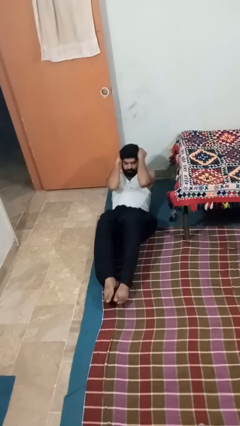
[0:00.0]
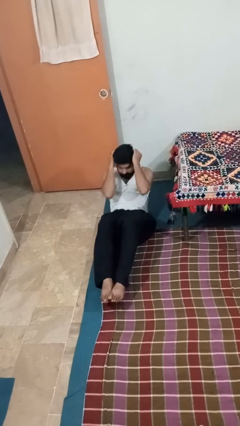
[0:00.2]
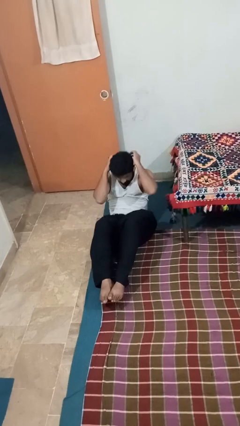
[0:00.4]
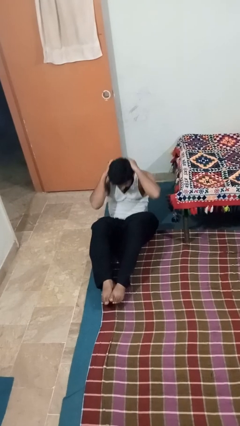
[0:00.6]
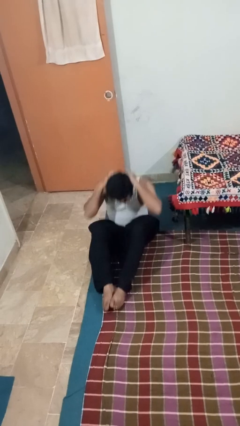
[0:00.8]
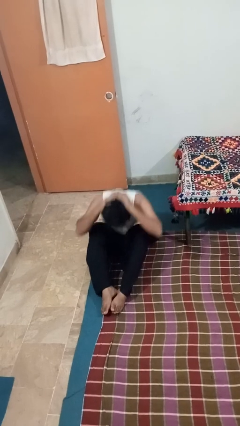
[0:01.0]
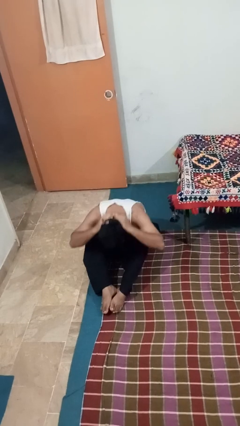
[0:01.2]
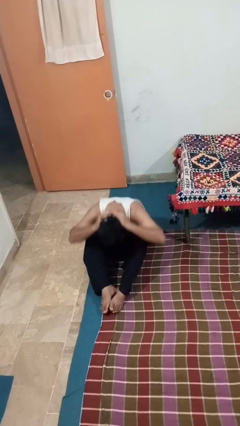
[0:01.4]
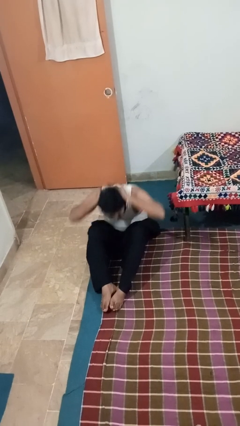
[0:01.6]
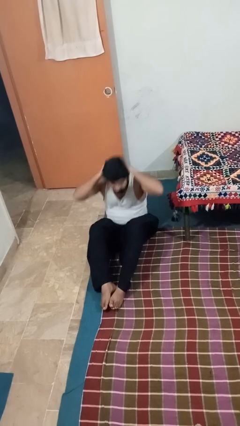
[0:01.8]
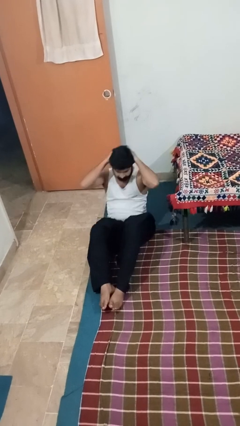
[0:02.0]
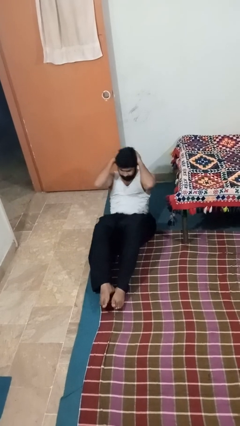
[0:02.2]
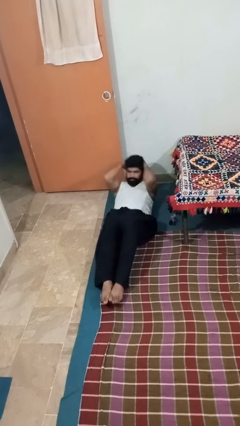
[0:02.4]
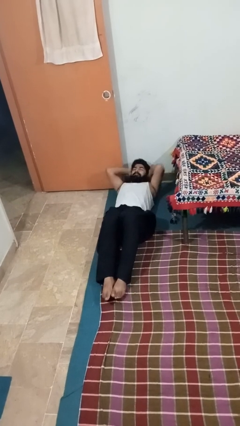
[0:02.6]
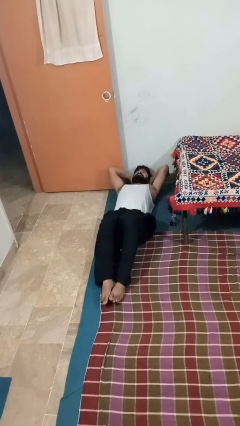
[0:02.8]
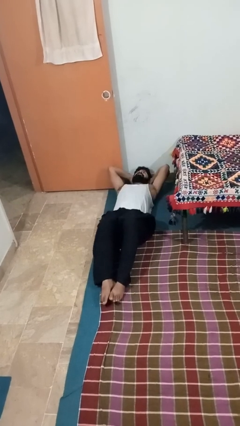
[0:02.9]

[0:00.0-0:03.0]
person exercises with situp

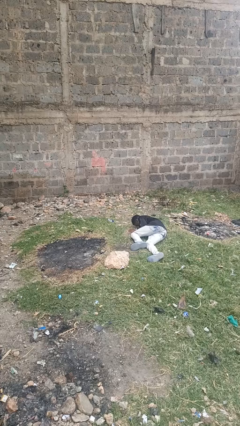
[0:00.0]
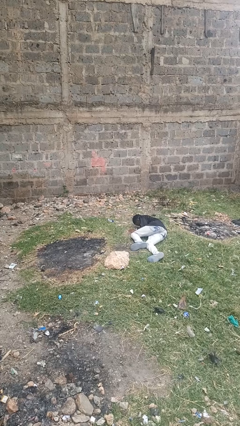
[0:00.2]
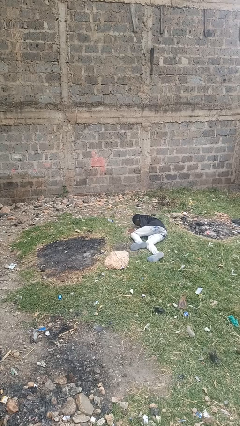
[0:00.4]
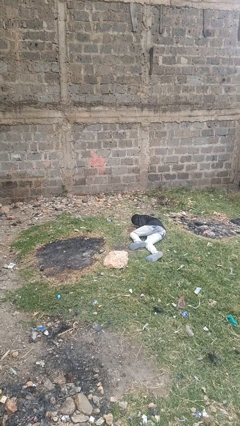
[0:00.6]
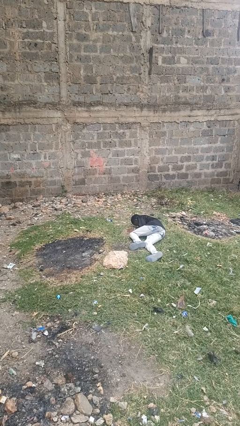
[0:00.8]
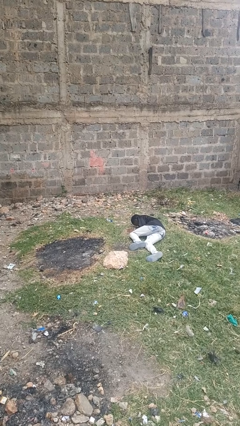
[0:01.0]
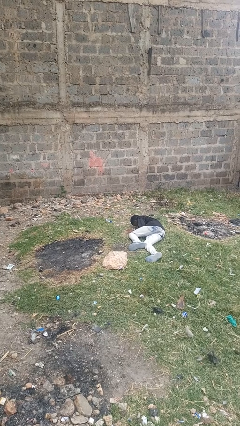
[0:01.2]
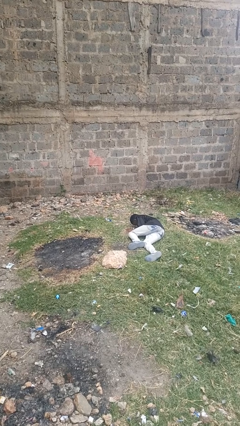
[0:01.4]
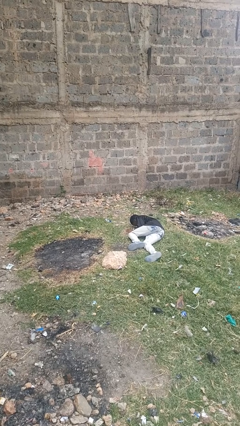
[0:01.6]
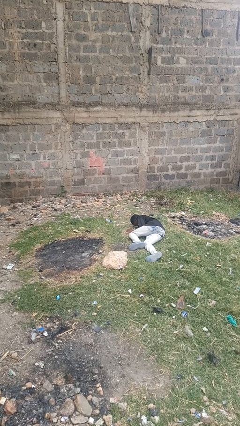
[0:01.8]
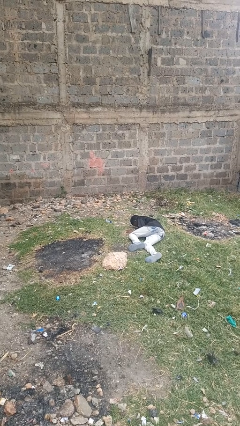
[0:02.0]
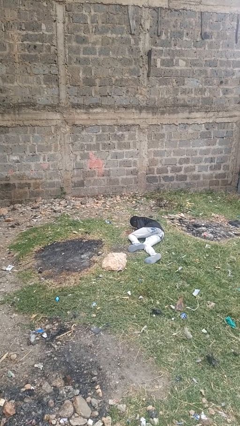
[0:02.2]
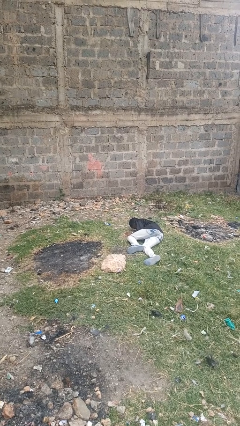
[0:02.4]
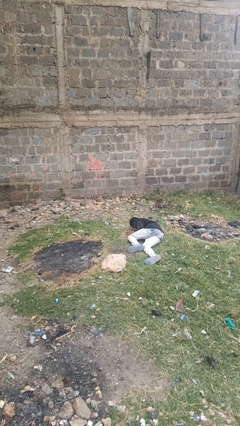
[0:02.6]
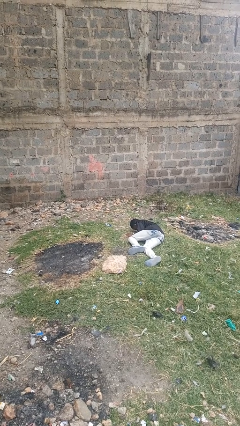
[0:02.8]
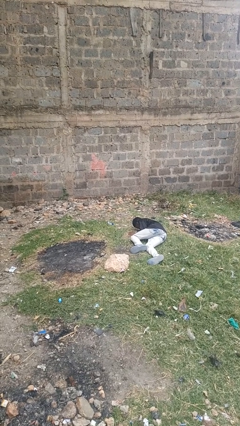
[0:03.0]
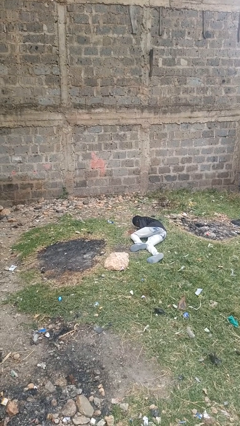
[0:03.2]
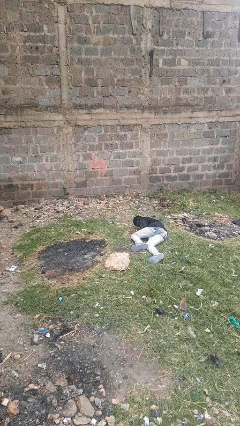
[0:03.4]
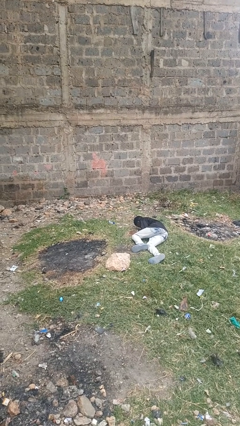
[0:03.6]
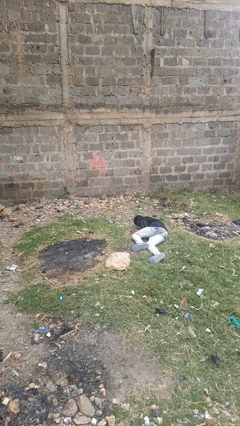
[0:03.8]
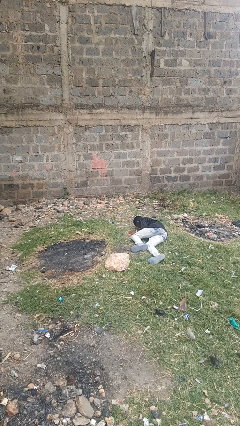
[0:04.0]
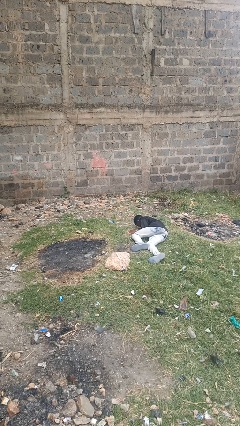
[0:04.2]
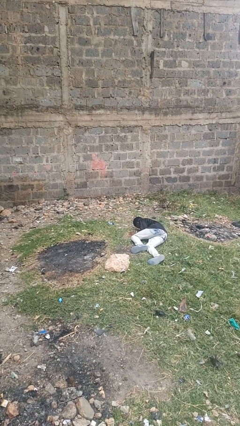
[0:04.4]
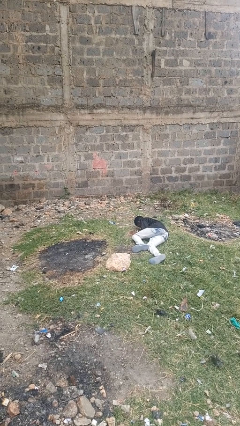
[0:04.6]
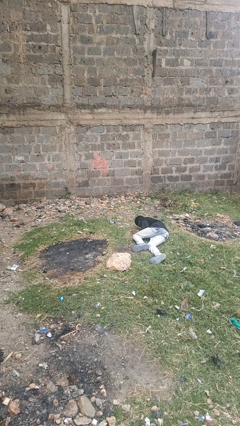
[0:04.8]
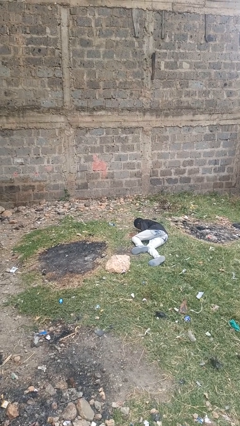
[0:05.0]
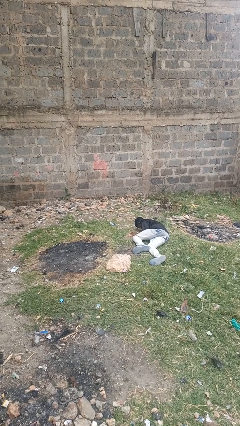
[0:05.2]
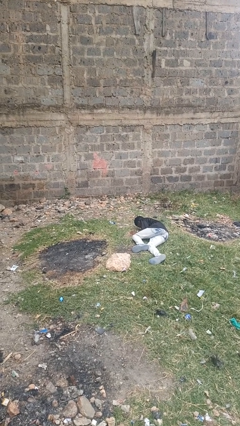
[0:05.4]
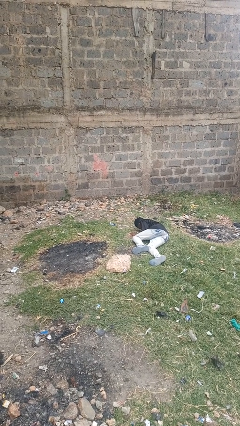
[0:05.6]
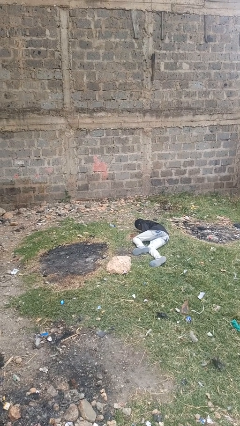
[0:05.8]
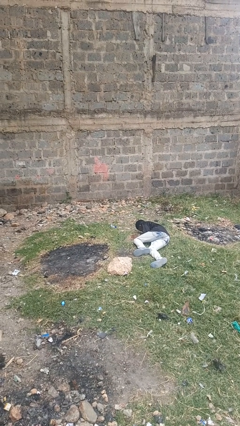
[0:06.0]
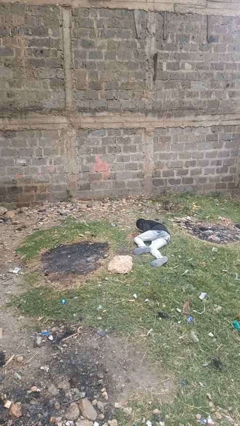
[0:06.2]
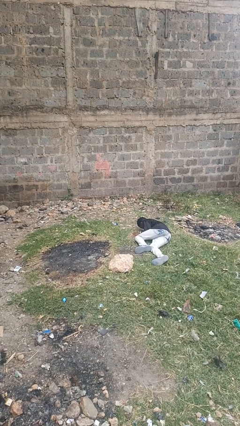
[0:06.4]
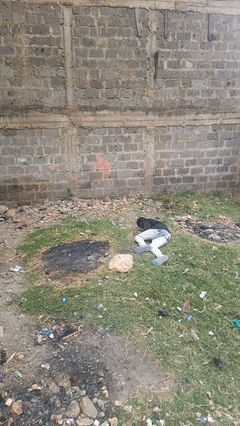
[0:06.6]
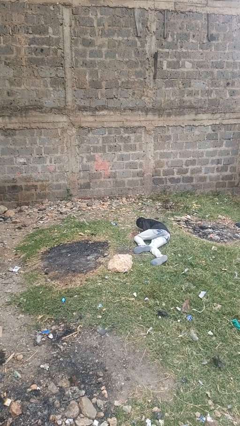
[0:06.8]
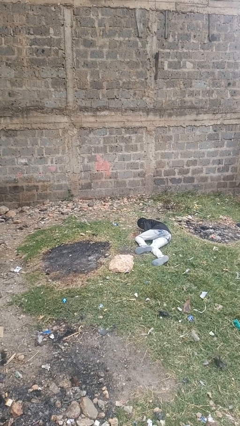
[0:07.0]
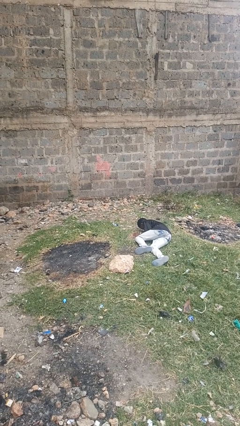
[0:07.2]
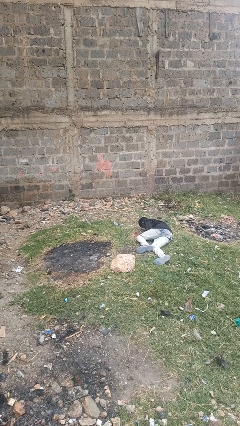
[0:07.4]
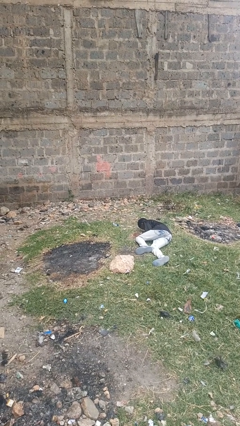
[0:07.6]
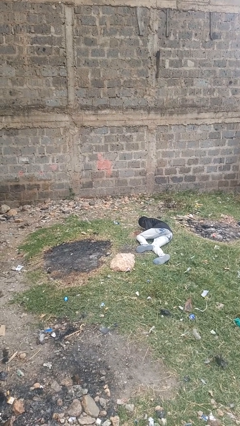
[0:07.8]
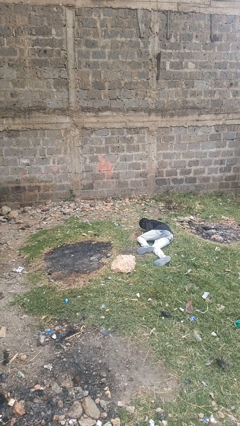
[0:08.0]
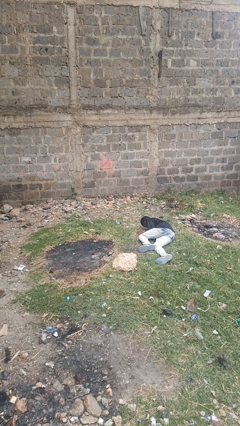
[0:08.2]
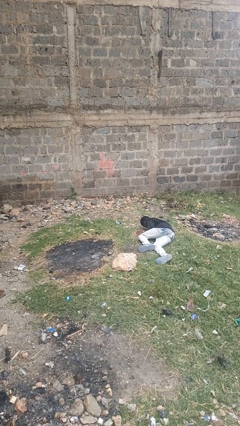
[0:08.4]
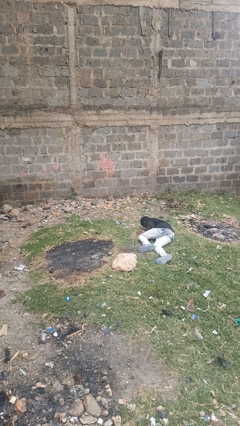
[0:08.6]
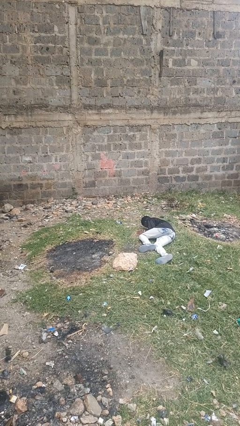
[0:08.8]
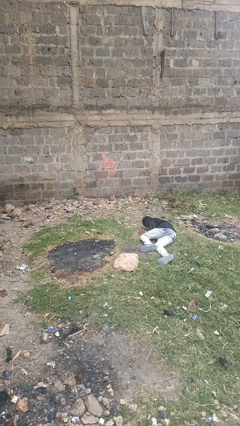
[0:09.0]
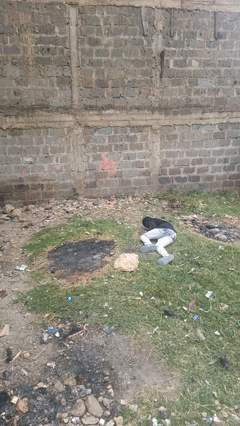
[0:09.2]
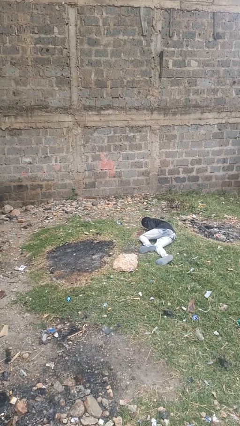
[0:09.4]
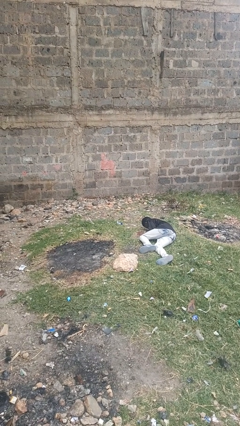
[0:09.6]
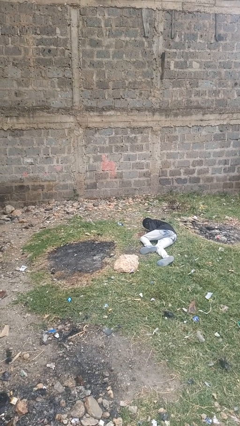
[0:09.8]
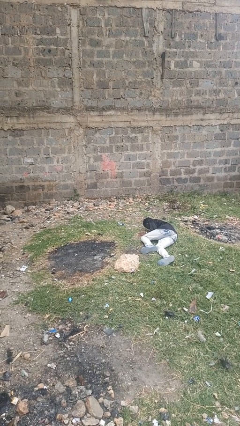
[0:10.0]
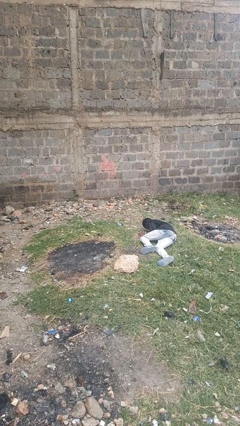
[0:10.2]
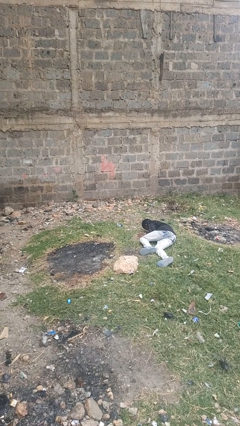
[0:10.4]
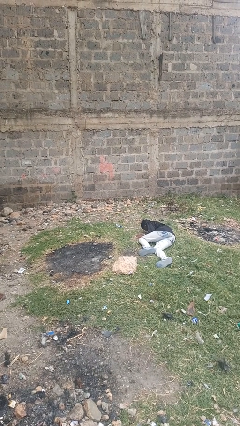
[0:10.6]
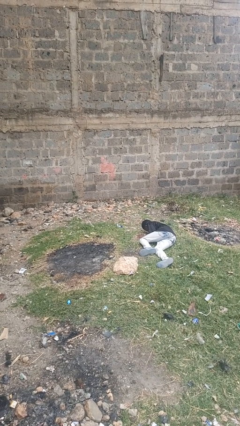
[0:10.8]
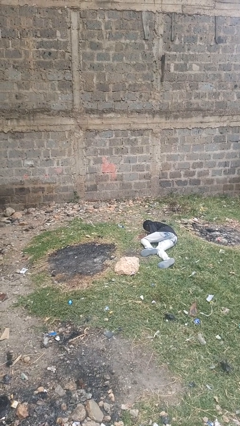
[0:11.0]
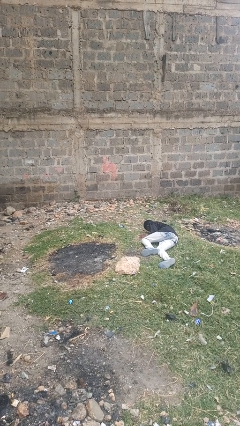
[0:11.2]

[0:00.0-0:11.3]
person lies down on floor

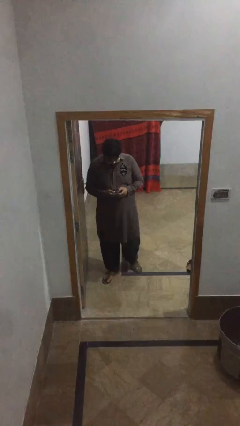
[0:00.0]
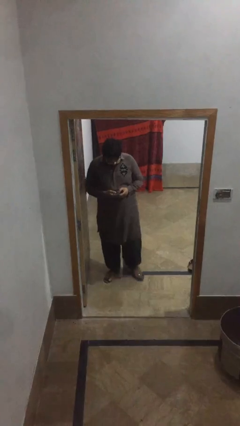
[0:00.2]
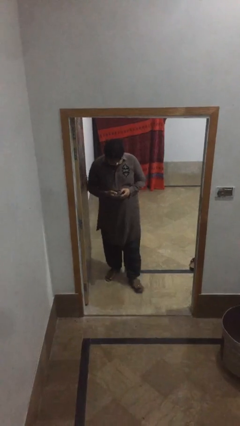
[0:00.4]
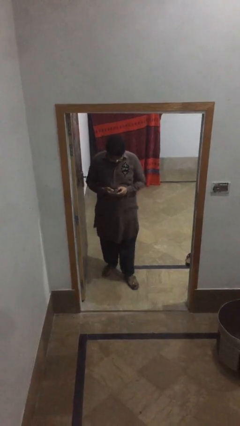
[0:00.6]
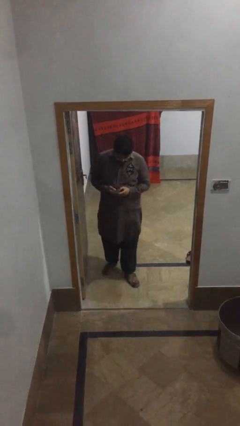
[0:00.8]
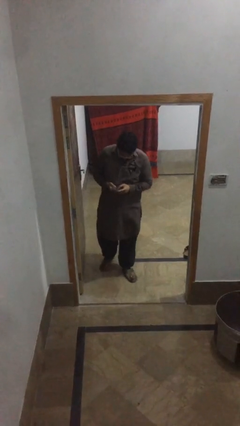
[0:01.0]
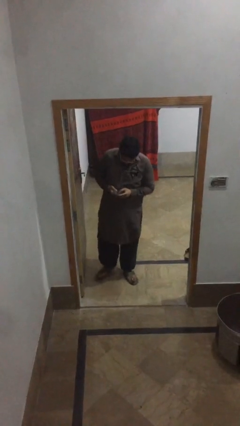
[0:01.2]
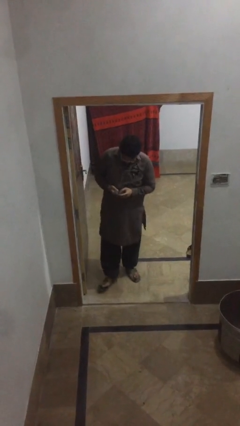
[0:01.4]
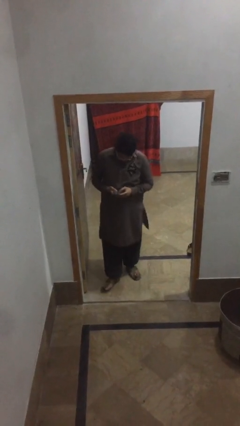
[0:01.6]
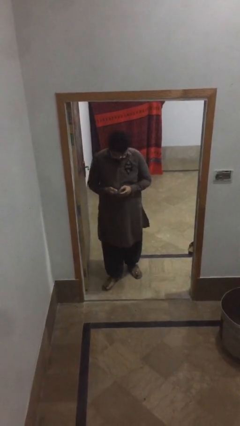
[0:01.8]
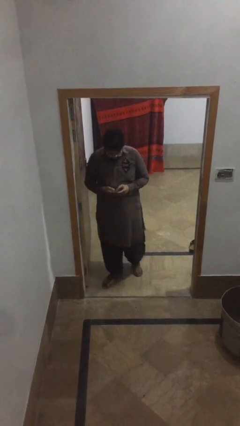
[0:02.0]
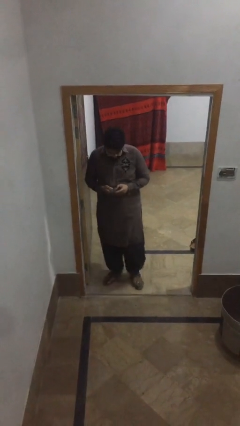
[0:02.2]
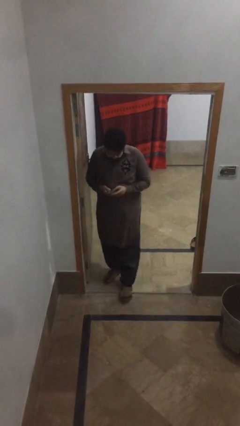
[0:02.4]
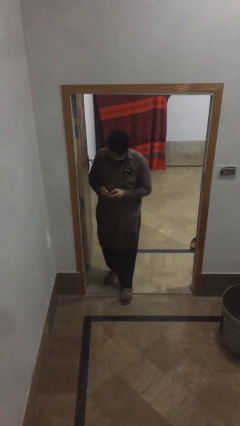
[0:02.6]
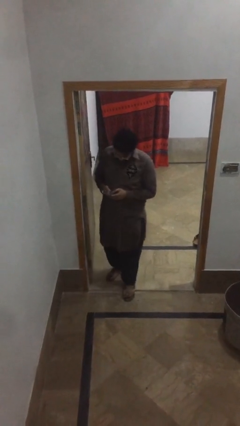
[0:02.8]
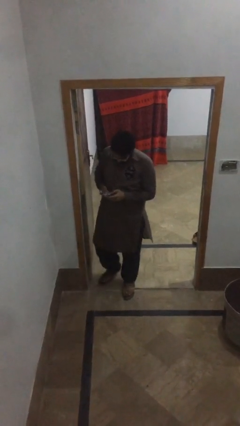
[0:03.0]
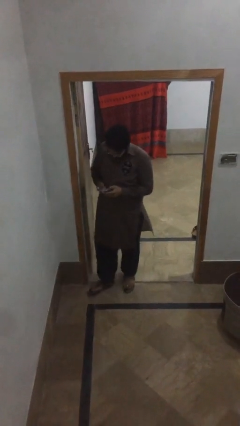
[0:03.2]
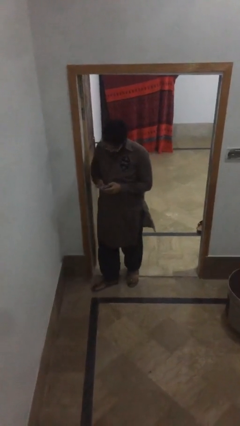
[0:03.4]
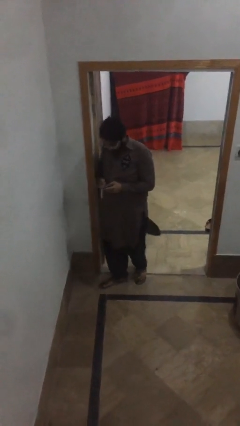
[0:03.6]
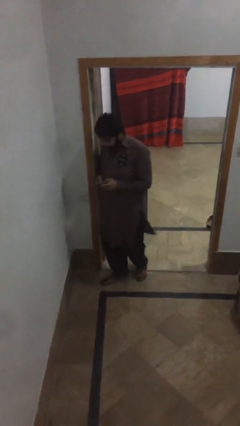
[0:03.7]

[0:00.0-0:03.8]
person texts on phone
